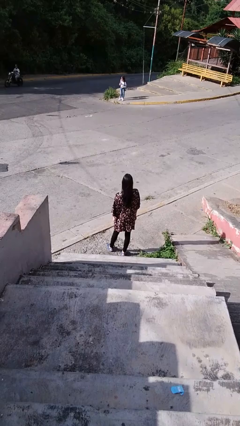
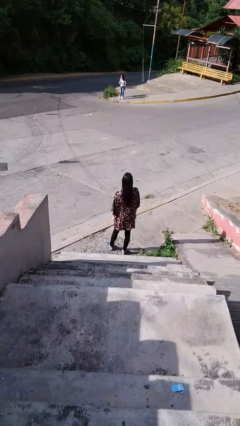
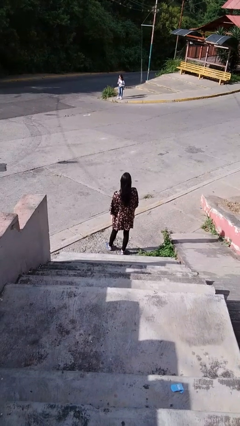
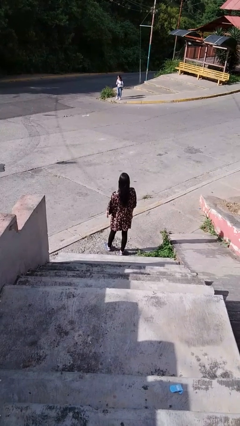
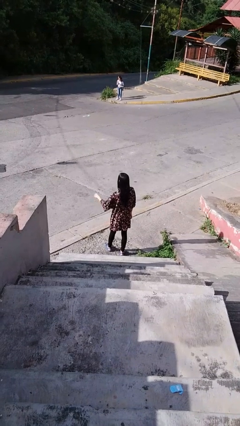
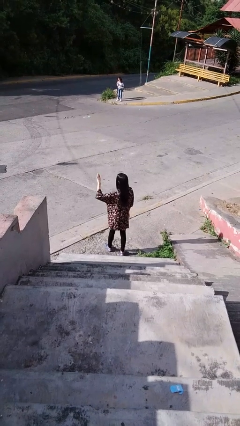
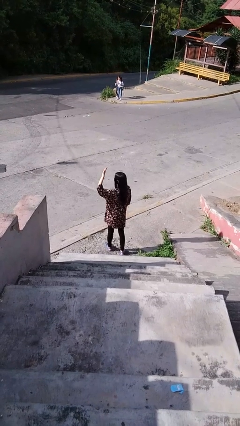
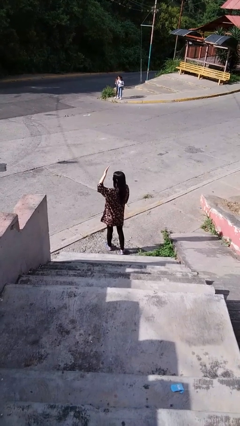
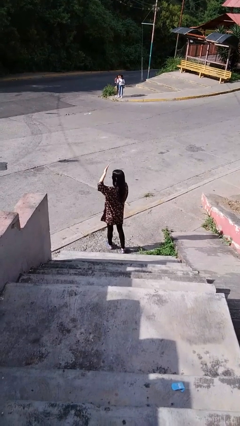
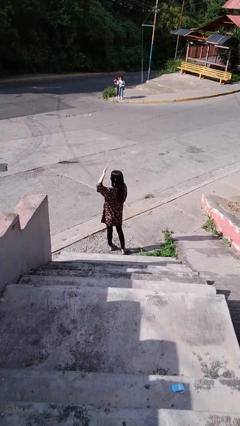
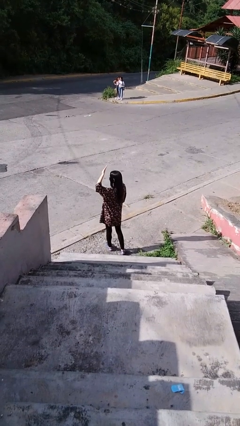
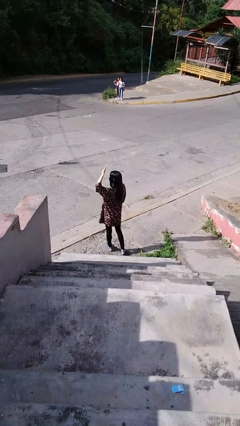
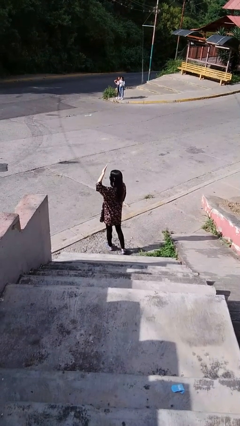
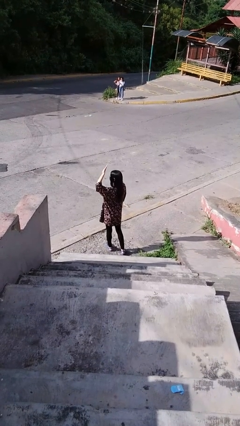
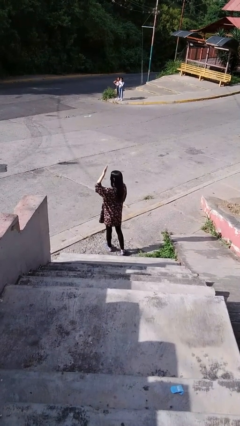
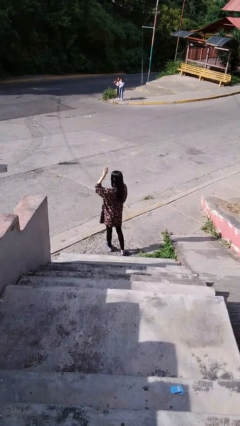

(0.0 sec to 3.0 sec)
person shades eyes

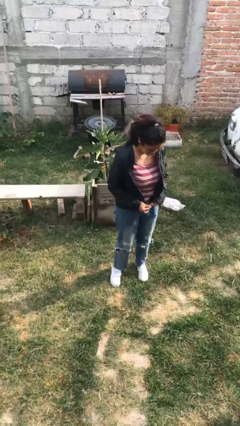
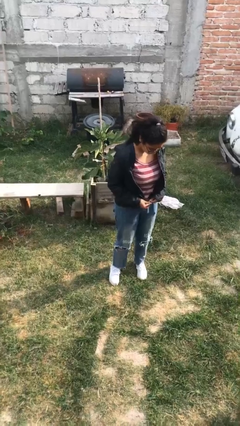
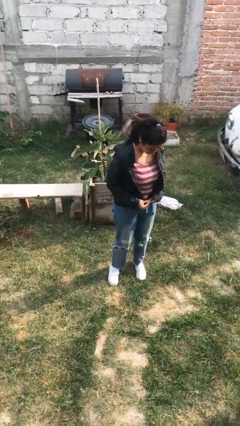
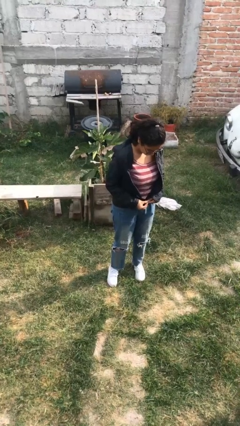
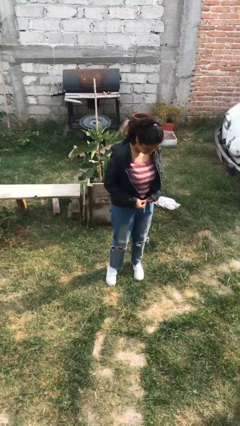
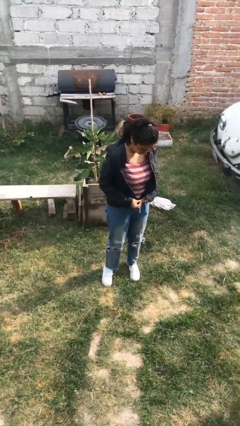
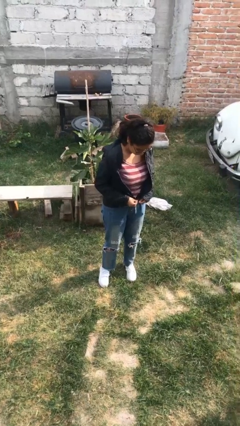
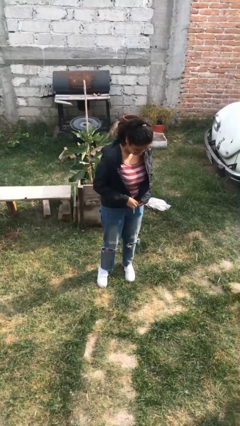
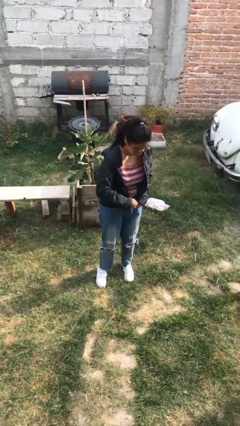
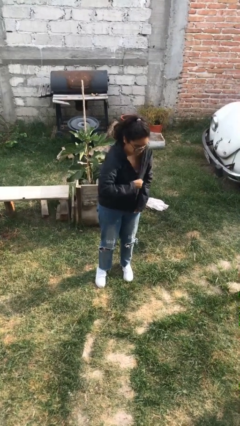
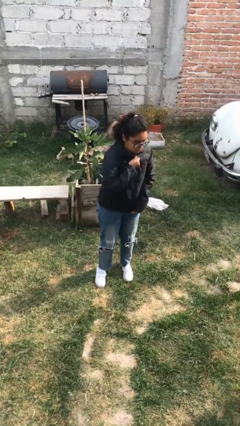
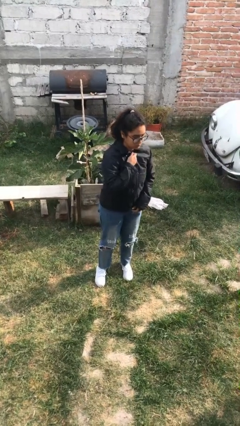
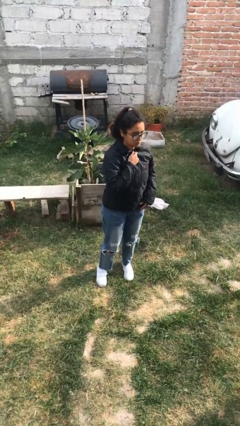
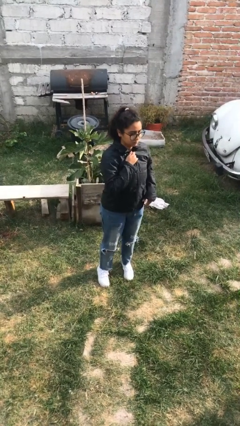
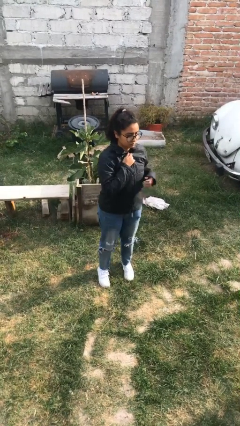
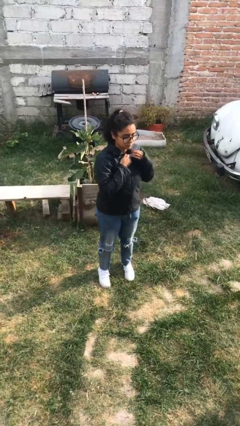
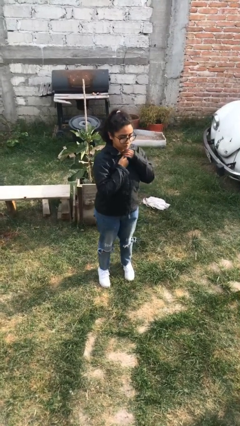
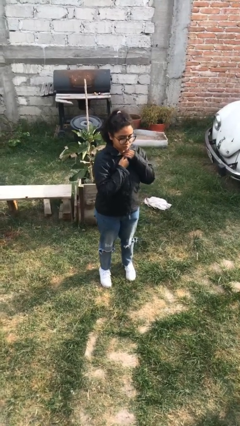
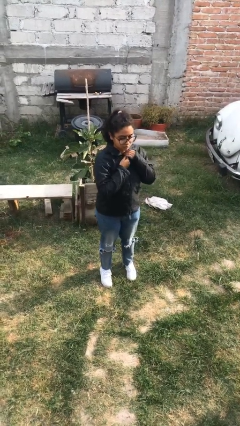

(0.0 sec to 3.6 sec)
person zips up jacket

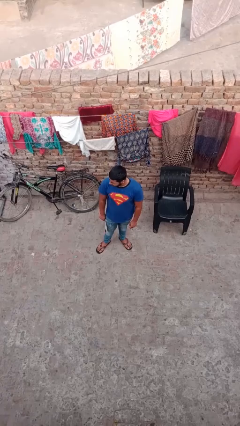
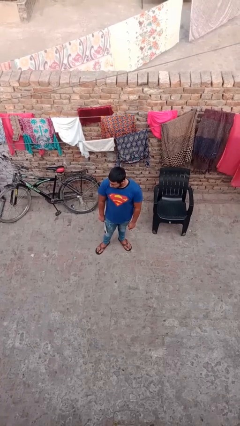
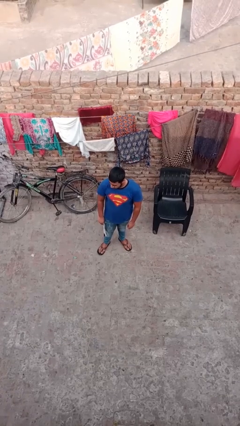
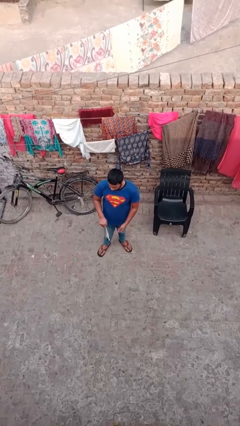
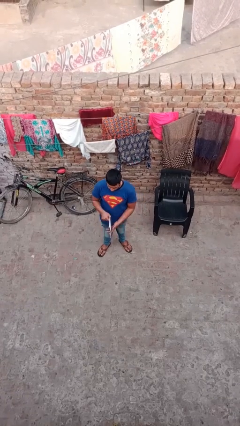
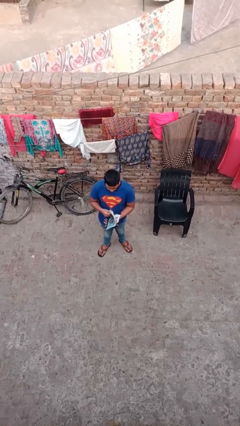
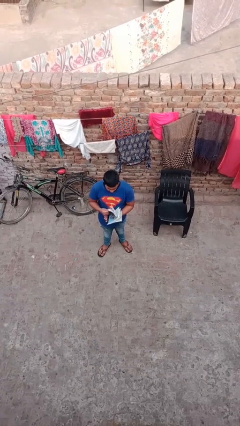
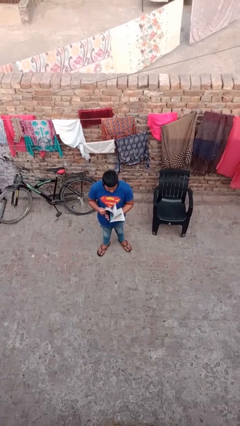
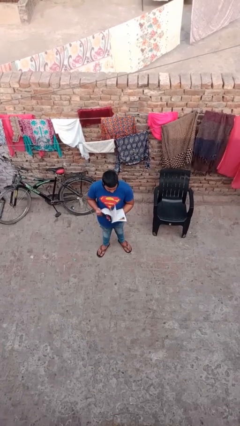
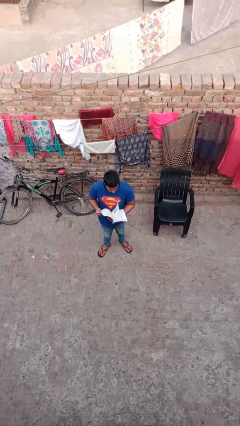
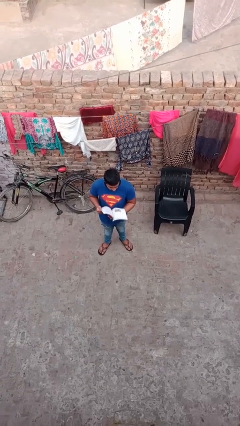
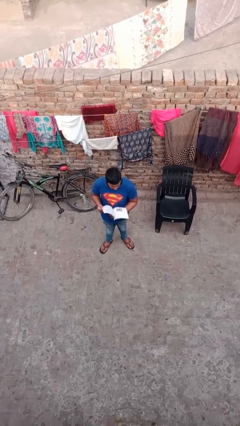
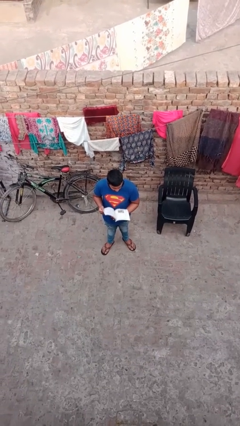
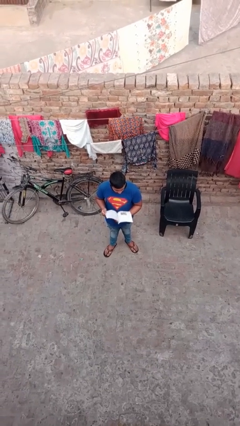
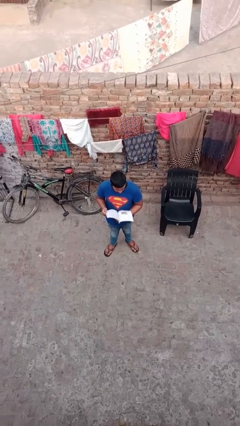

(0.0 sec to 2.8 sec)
person reads document

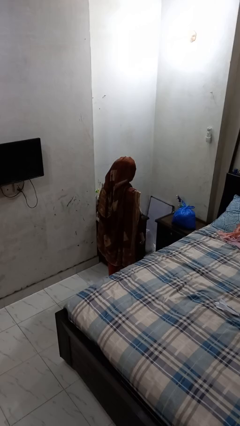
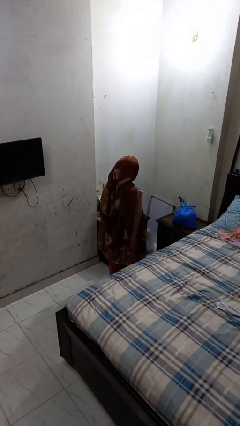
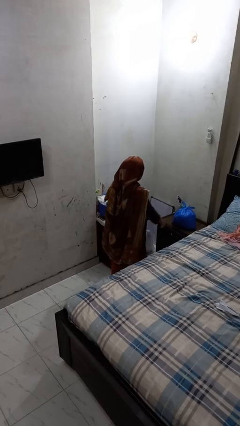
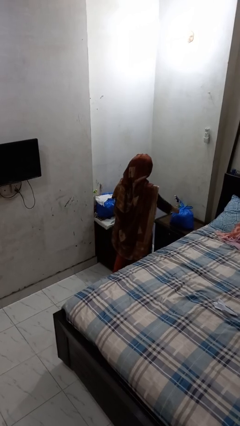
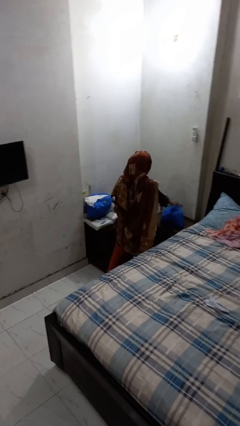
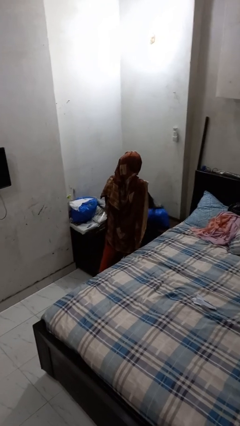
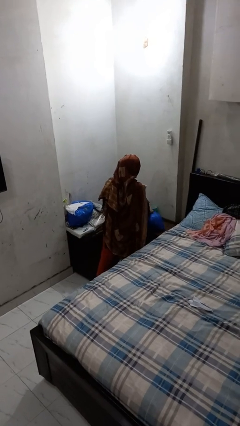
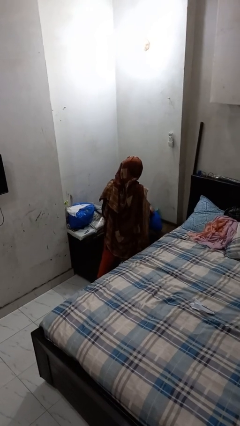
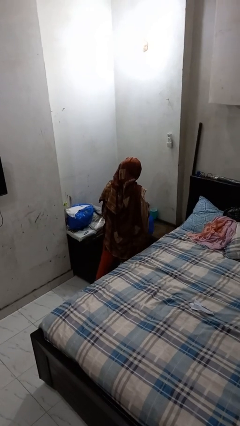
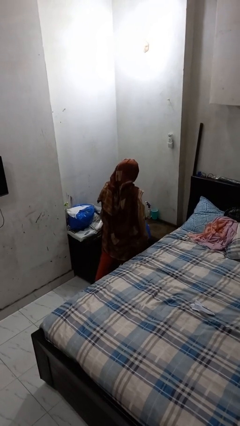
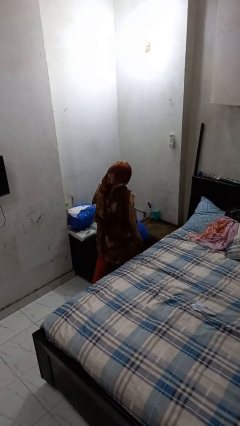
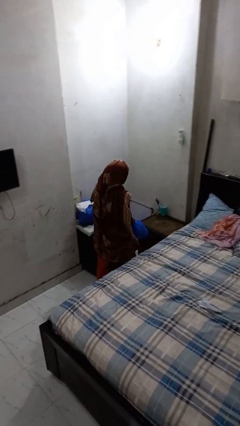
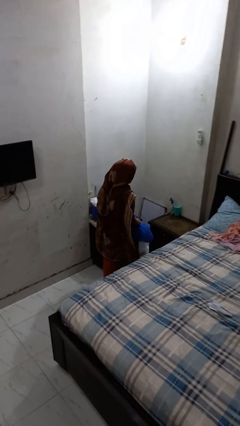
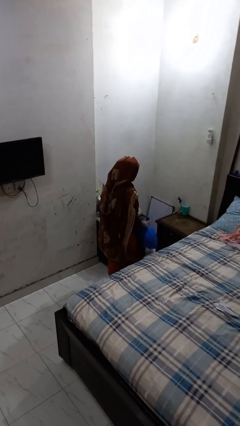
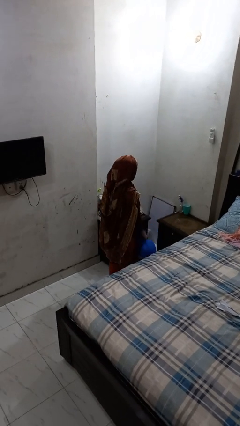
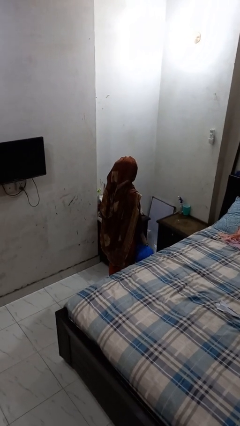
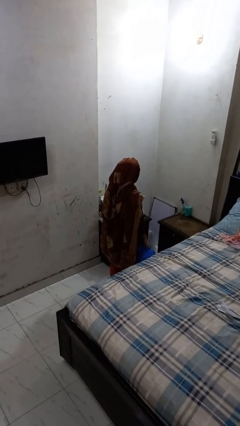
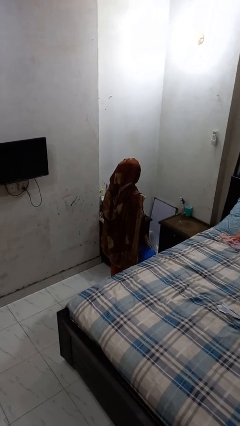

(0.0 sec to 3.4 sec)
person picks up object from table

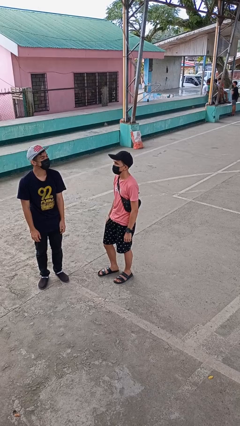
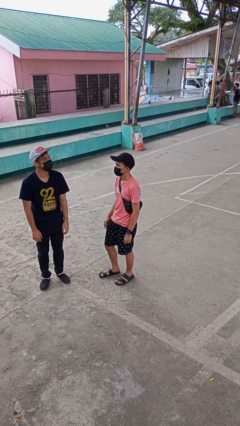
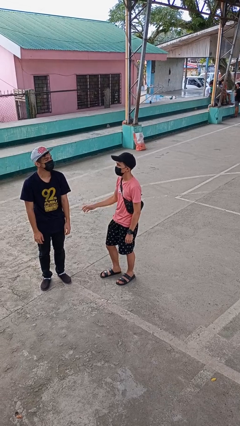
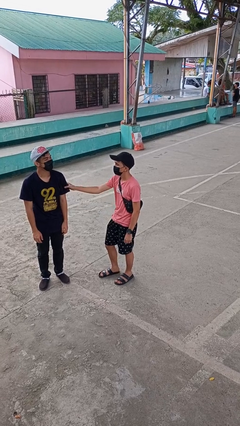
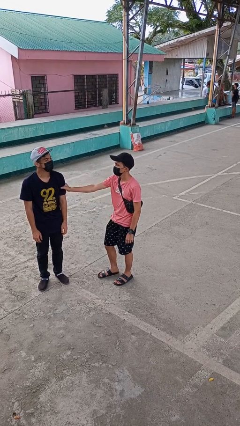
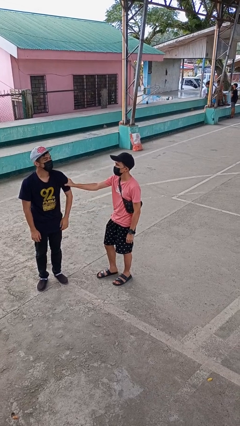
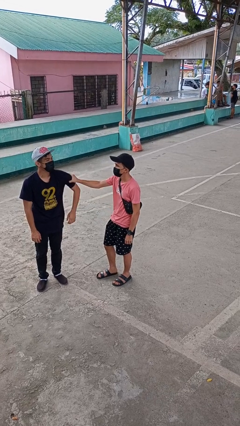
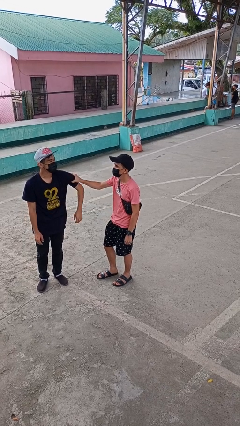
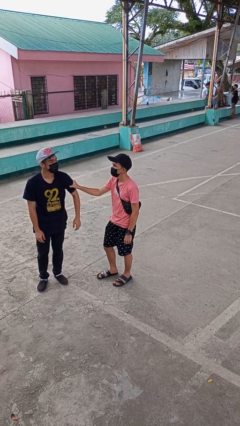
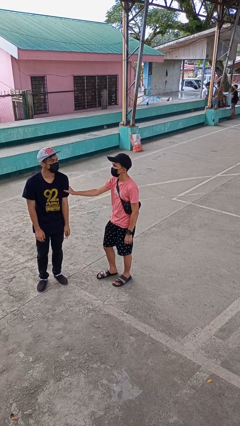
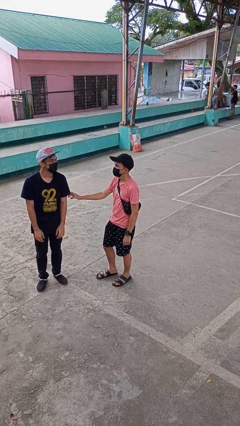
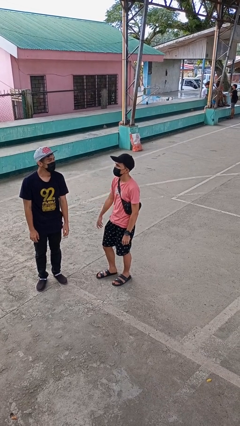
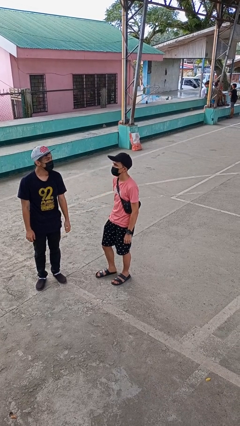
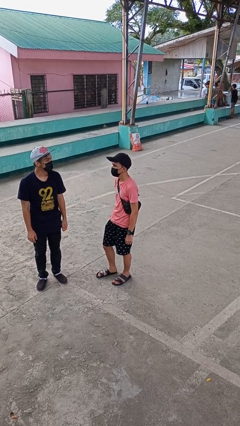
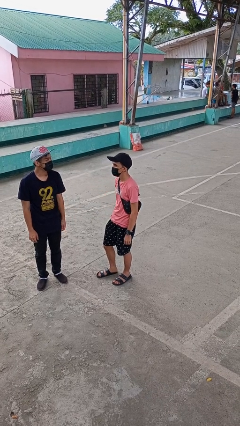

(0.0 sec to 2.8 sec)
person grabs person by bicep

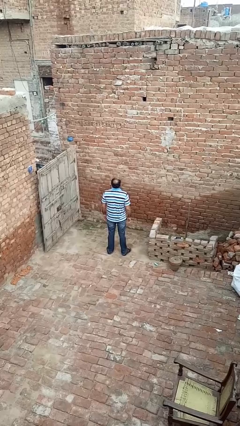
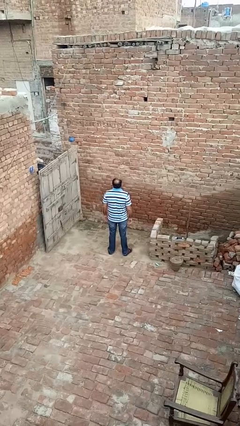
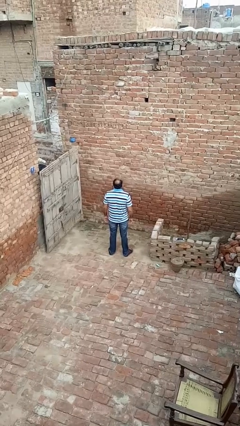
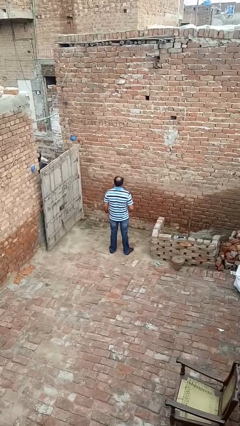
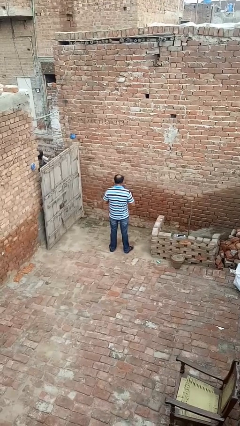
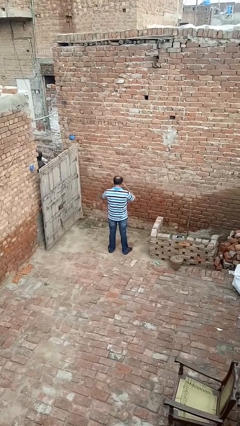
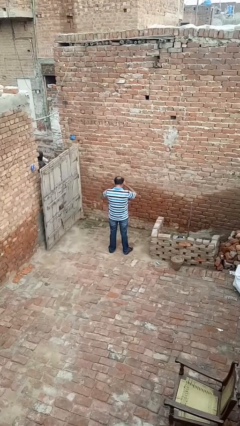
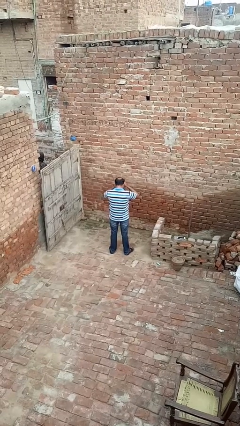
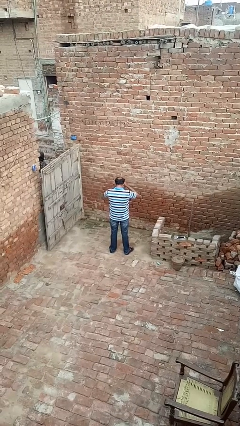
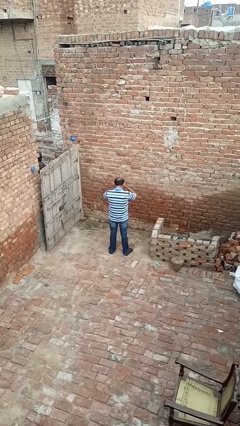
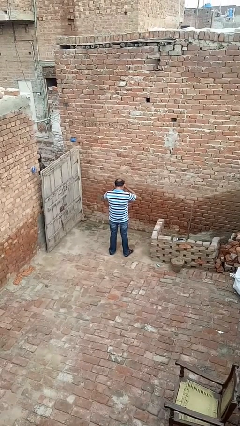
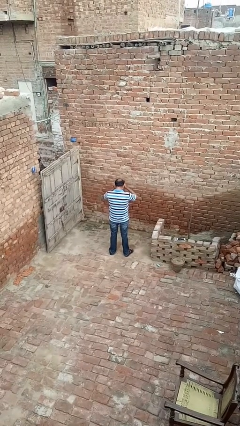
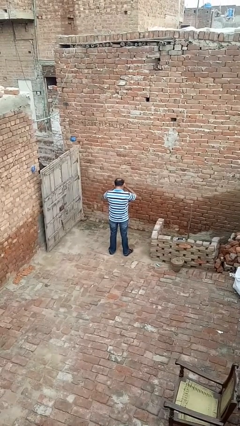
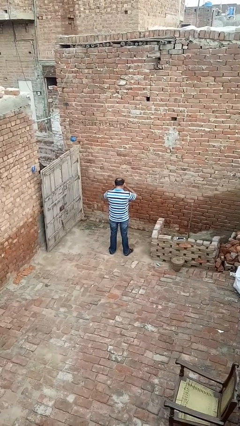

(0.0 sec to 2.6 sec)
person rubs eyes
